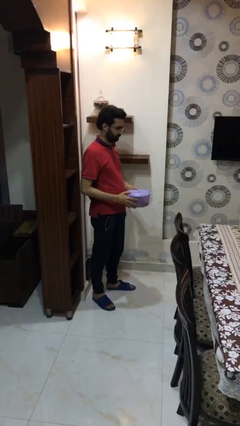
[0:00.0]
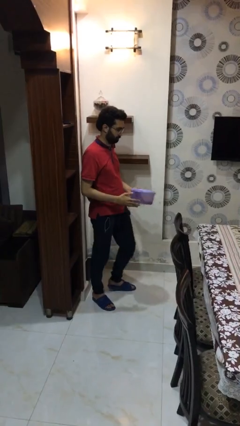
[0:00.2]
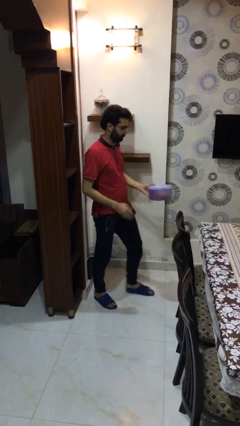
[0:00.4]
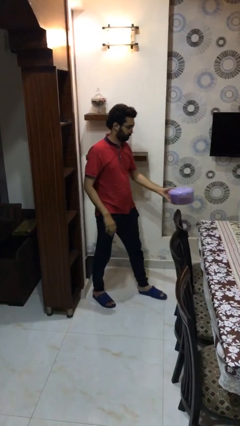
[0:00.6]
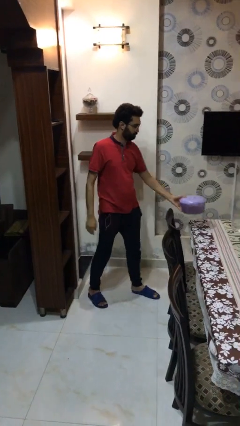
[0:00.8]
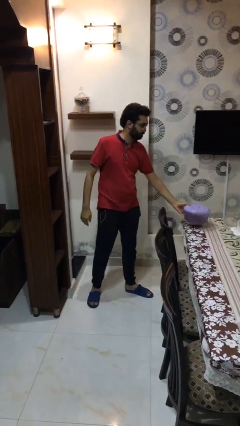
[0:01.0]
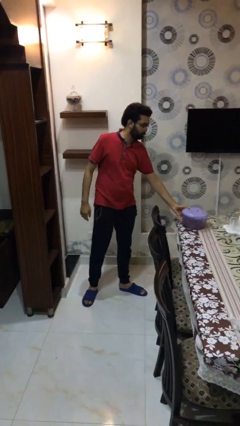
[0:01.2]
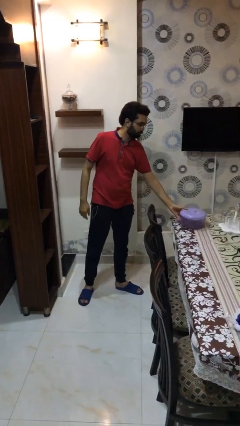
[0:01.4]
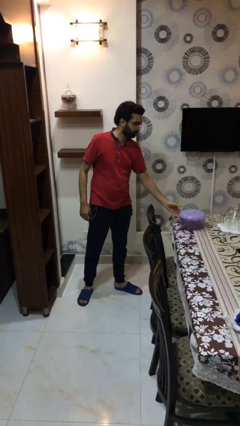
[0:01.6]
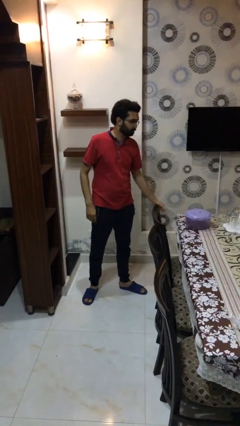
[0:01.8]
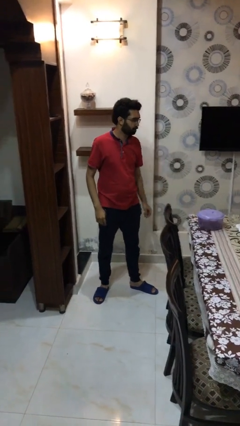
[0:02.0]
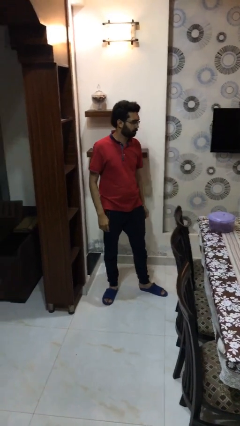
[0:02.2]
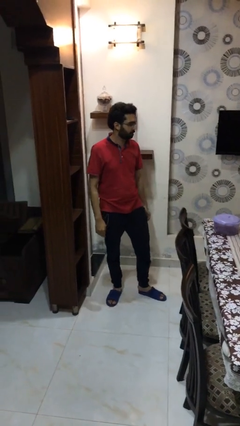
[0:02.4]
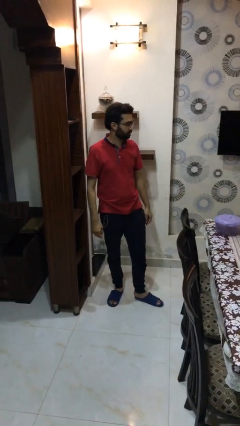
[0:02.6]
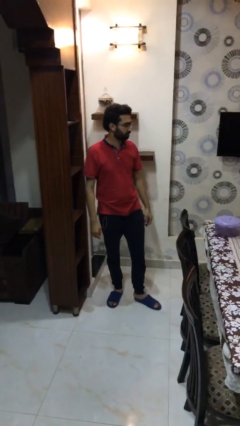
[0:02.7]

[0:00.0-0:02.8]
person puts down object on table

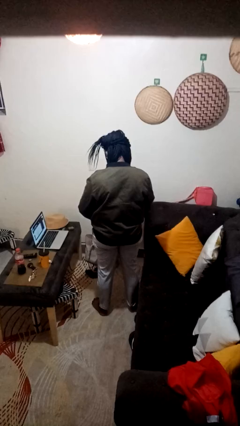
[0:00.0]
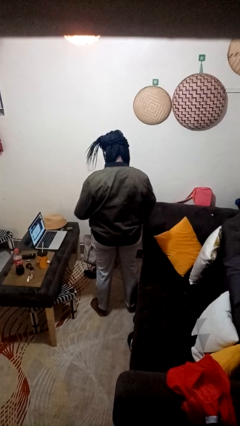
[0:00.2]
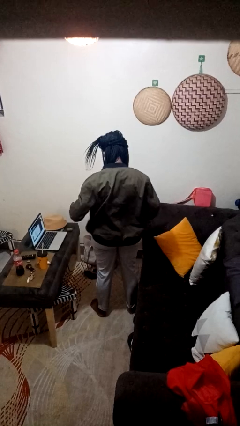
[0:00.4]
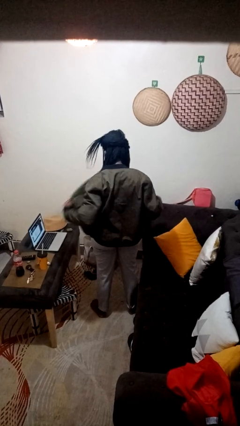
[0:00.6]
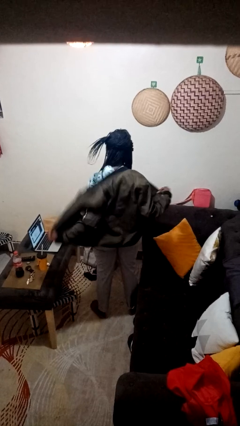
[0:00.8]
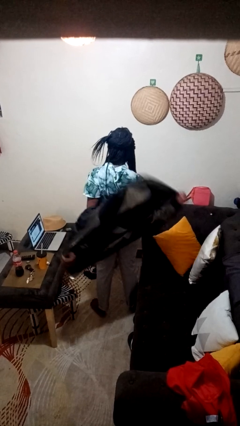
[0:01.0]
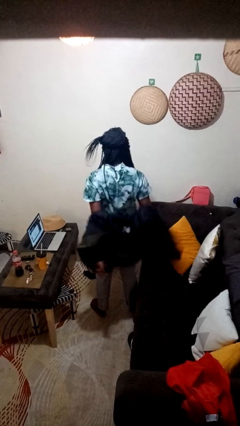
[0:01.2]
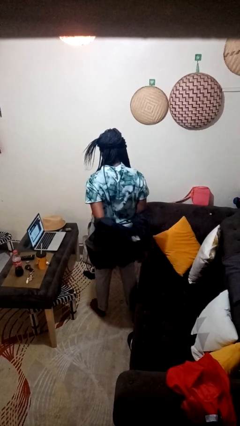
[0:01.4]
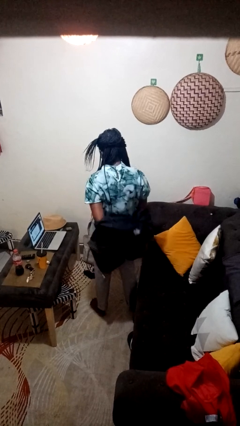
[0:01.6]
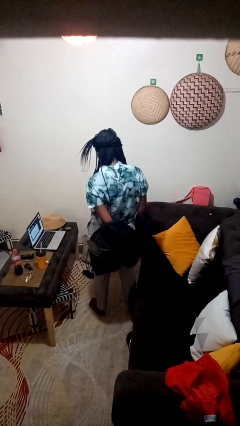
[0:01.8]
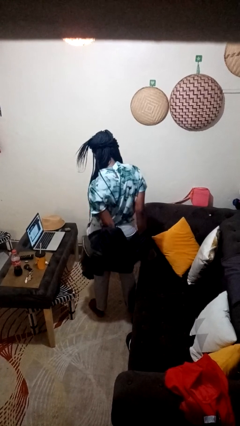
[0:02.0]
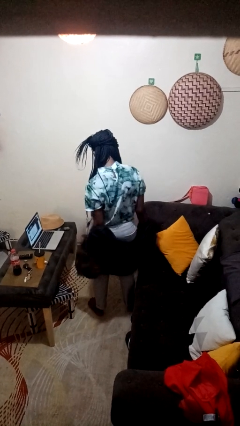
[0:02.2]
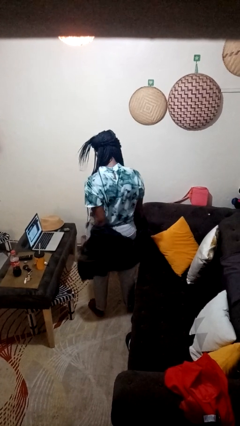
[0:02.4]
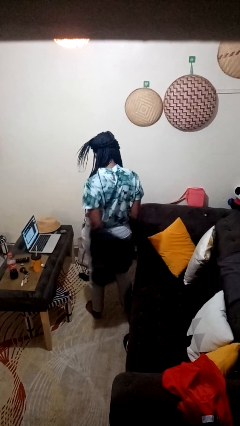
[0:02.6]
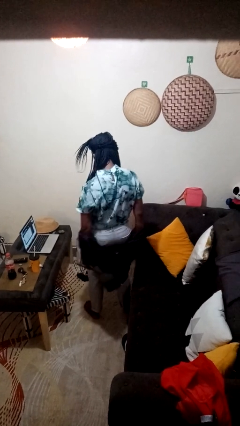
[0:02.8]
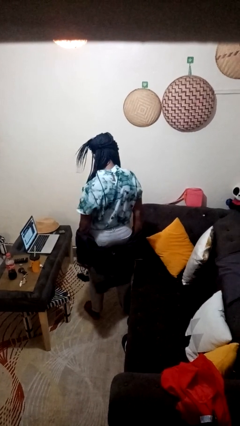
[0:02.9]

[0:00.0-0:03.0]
person takes off jacket

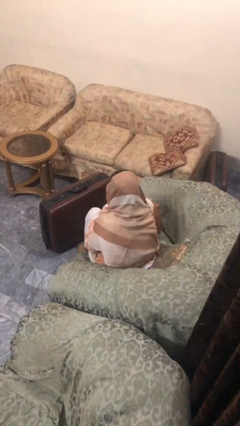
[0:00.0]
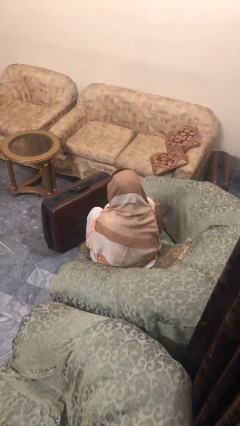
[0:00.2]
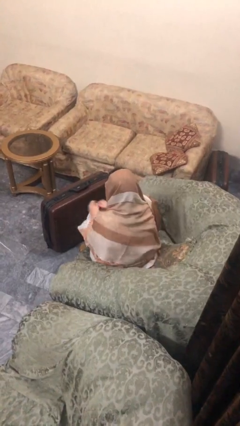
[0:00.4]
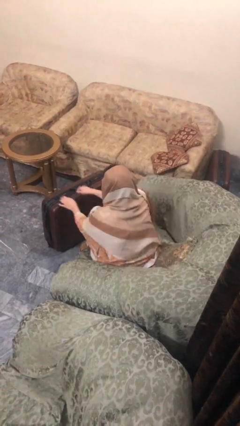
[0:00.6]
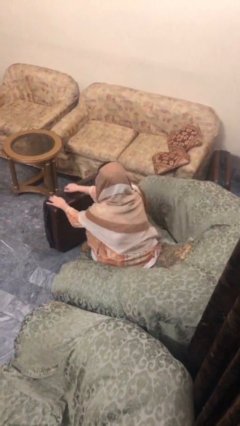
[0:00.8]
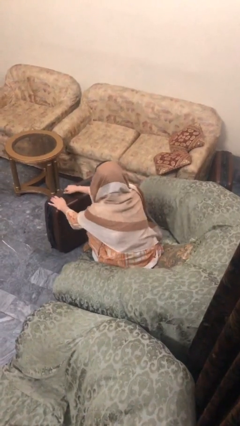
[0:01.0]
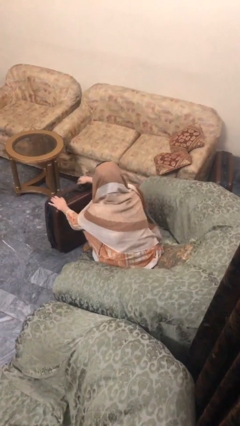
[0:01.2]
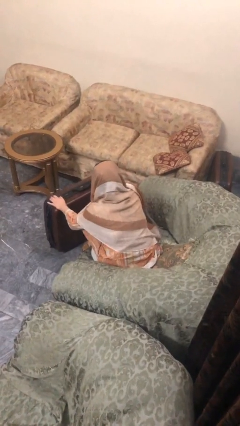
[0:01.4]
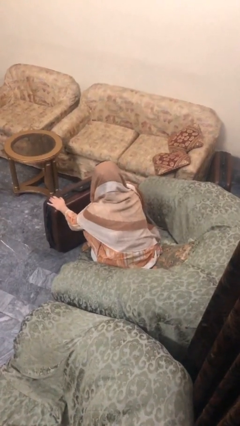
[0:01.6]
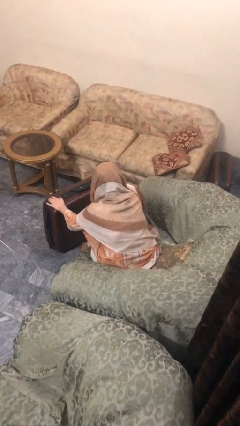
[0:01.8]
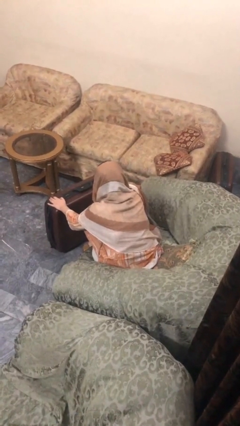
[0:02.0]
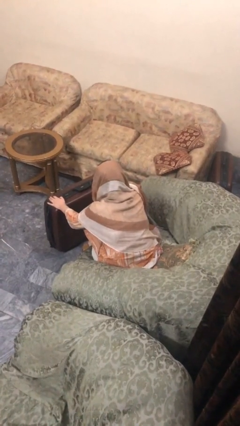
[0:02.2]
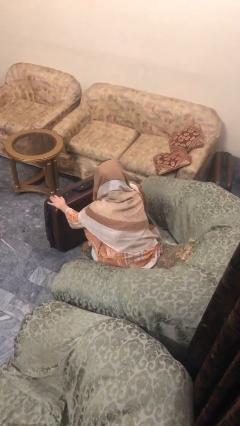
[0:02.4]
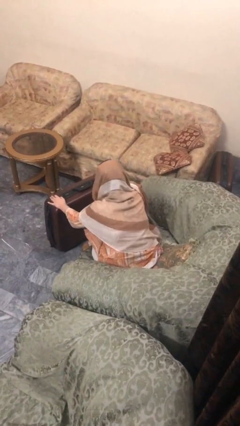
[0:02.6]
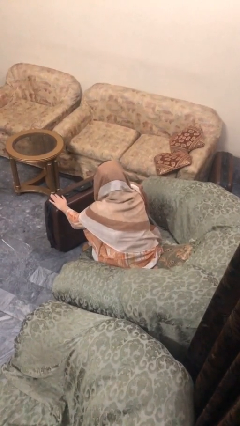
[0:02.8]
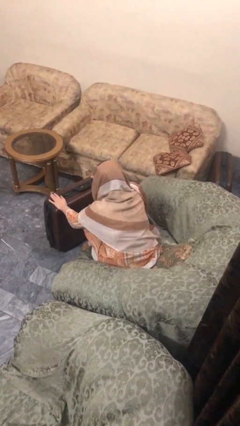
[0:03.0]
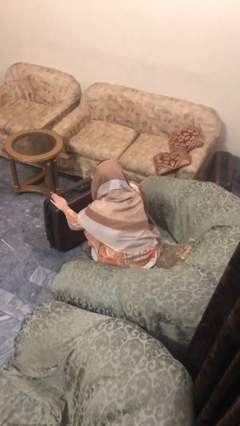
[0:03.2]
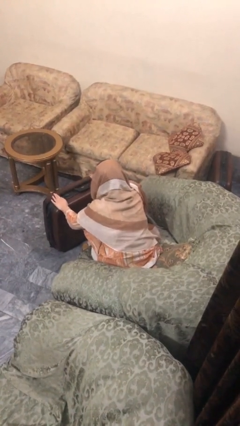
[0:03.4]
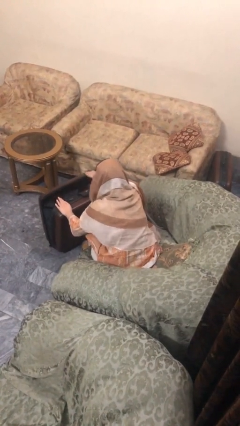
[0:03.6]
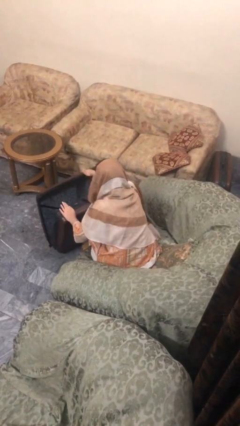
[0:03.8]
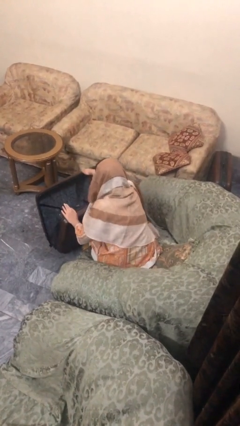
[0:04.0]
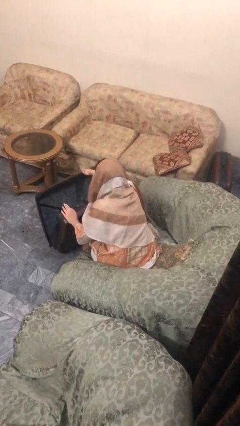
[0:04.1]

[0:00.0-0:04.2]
person opens suitcase

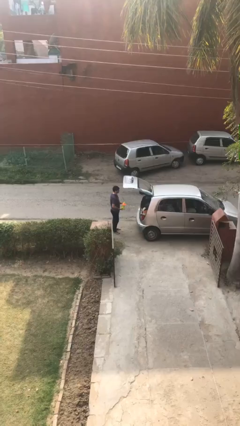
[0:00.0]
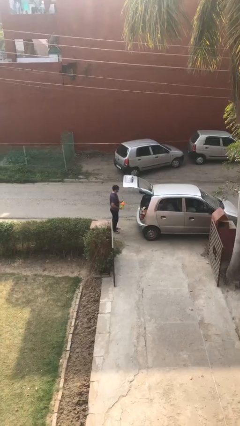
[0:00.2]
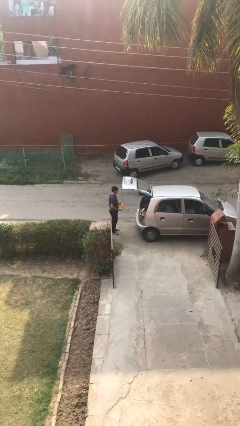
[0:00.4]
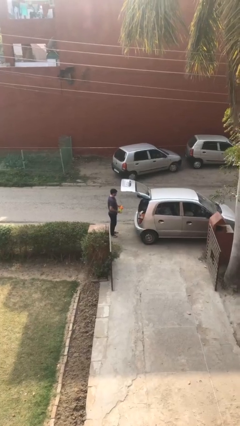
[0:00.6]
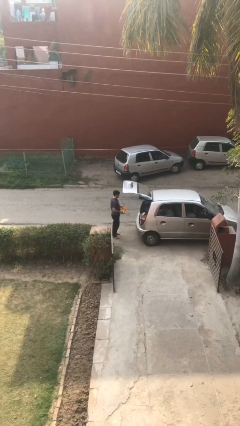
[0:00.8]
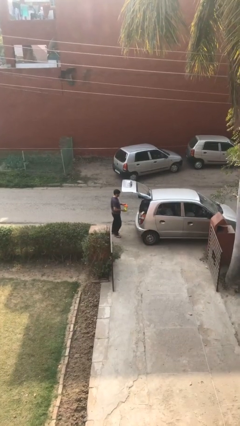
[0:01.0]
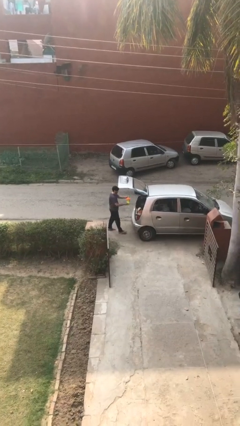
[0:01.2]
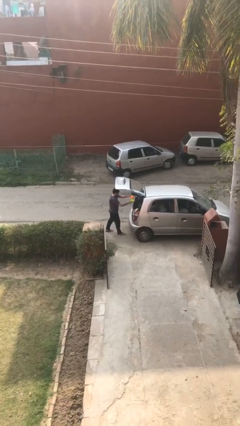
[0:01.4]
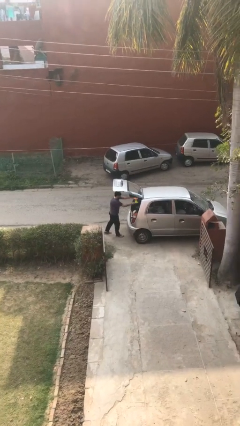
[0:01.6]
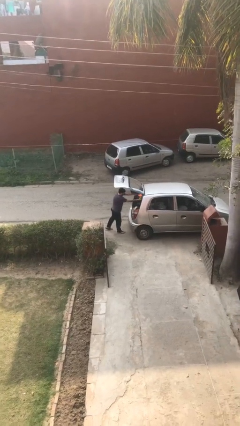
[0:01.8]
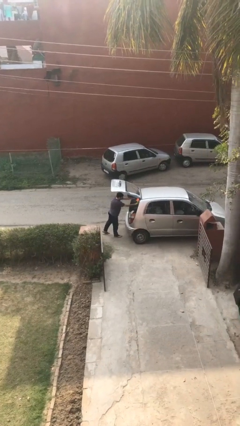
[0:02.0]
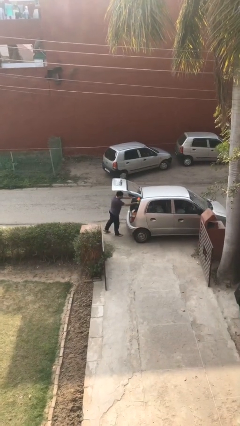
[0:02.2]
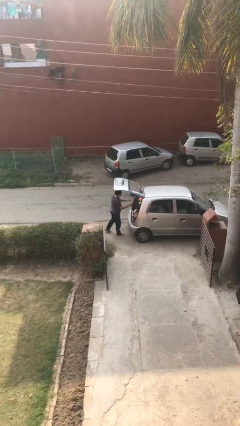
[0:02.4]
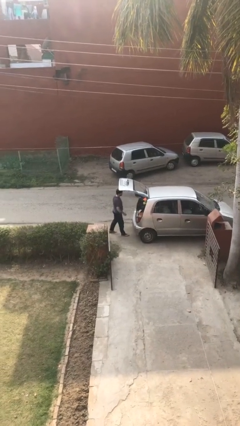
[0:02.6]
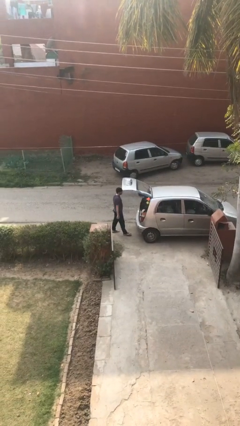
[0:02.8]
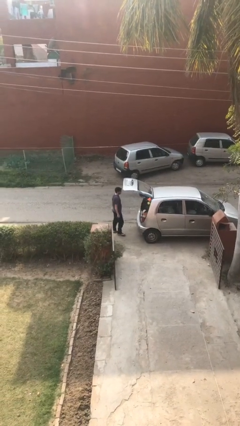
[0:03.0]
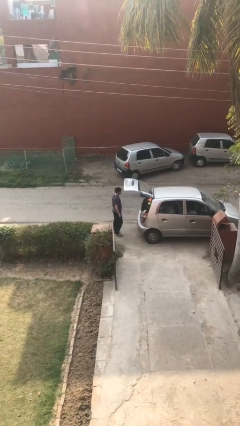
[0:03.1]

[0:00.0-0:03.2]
person loads car

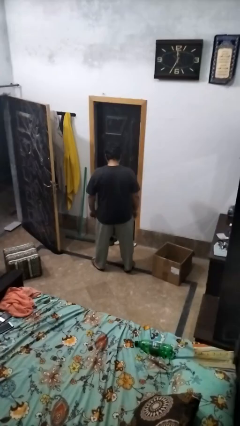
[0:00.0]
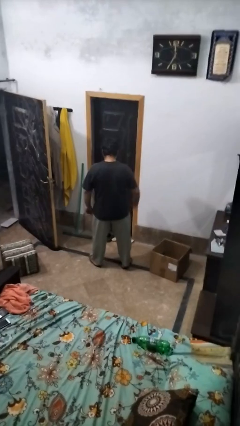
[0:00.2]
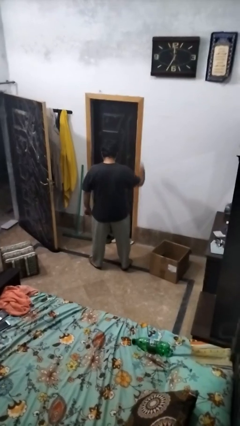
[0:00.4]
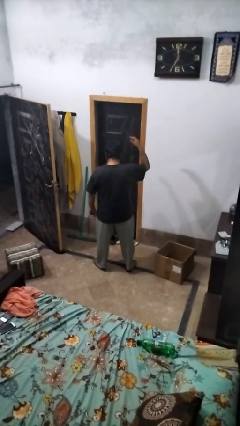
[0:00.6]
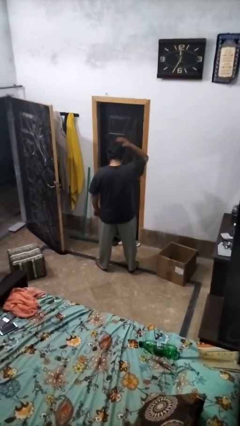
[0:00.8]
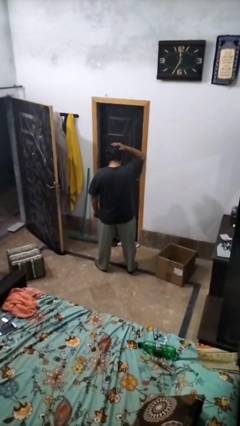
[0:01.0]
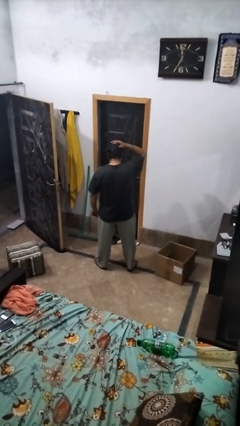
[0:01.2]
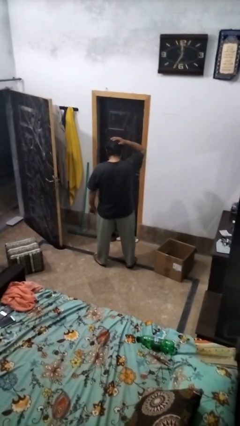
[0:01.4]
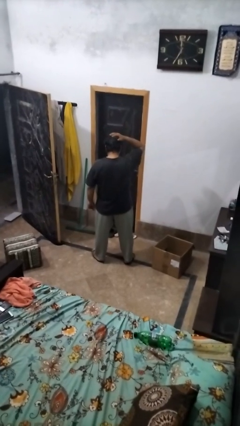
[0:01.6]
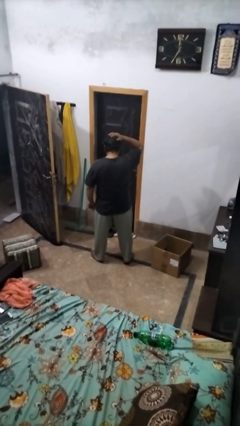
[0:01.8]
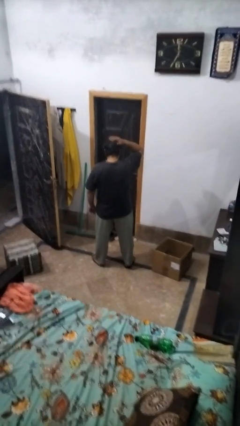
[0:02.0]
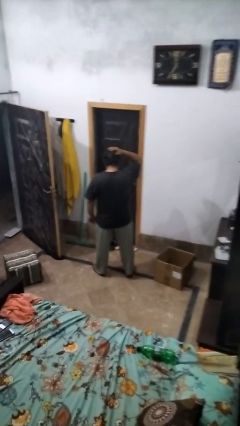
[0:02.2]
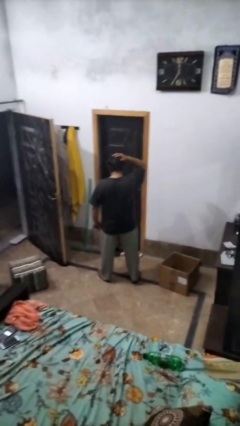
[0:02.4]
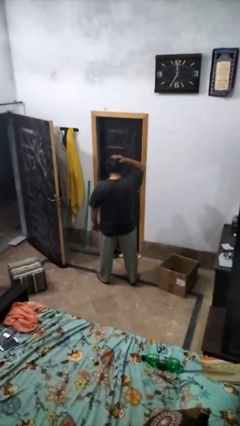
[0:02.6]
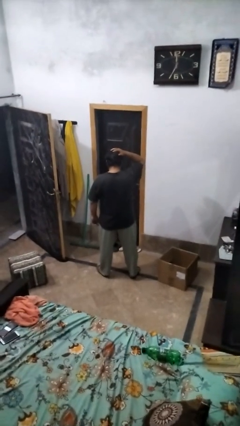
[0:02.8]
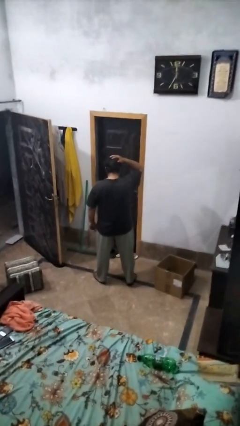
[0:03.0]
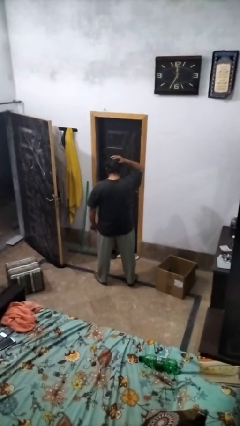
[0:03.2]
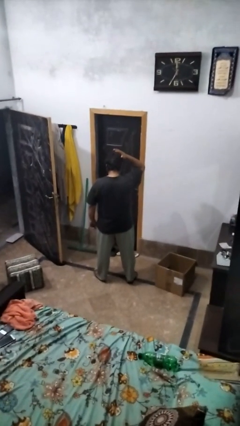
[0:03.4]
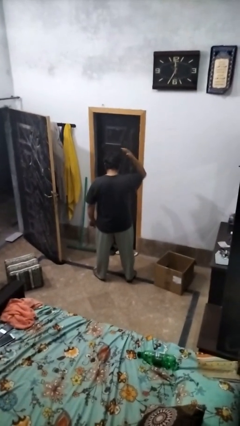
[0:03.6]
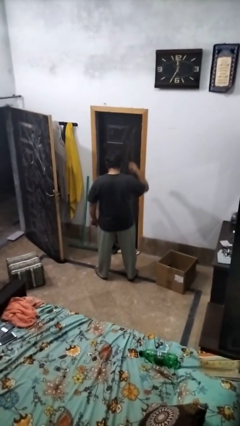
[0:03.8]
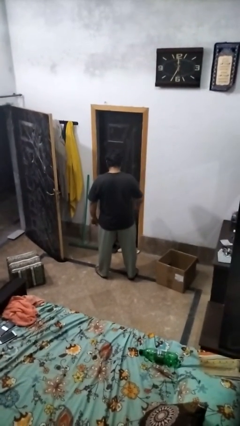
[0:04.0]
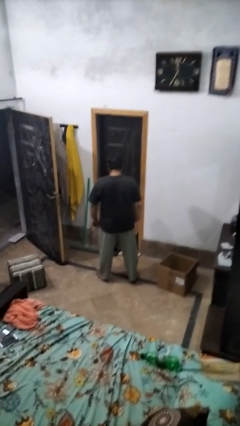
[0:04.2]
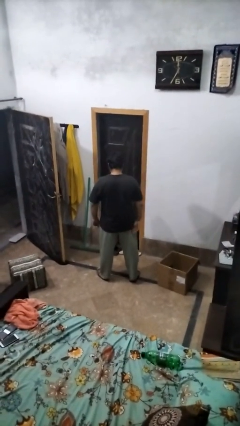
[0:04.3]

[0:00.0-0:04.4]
person pats head

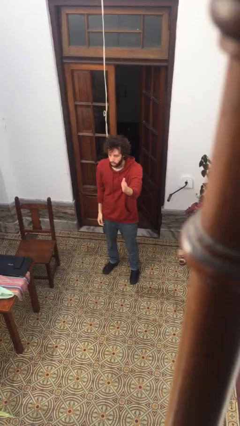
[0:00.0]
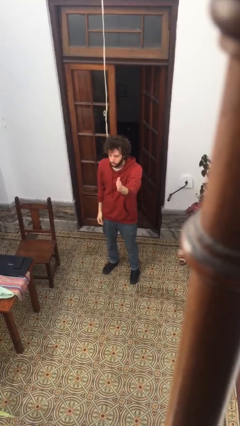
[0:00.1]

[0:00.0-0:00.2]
person gestures swipe right
